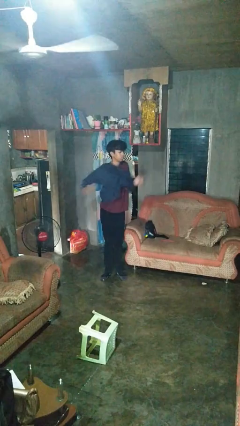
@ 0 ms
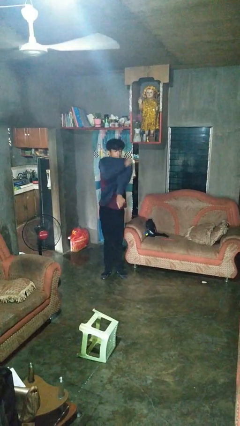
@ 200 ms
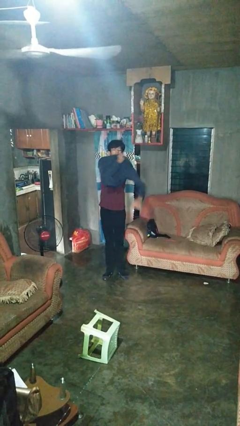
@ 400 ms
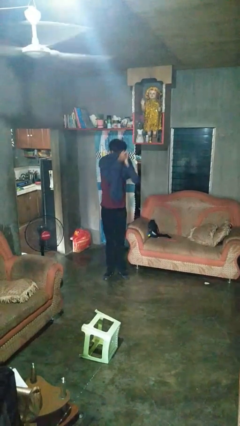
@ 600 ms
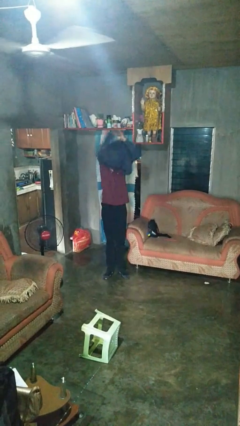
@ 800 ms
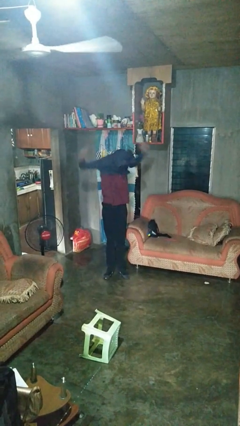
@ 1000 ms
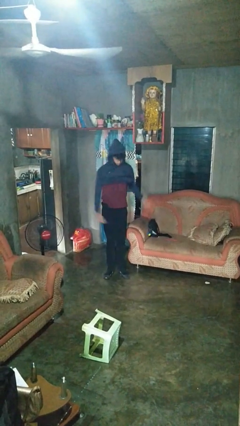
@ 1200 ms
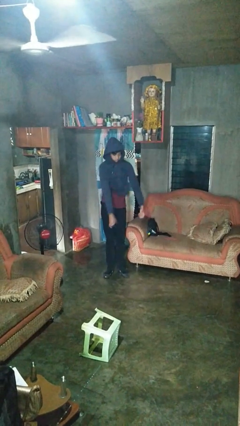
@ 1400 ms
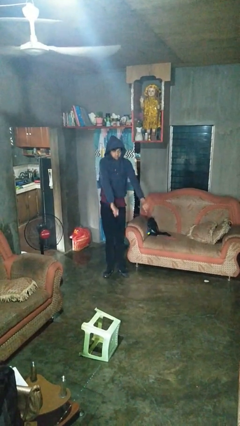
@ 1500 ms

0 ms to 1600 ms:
person puts on hoodie

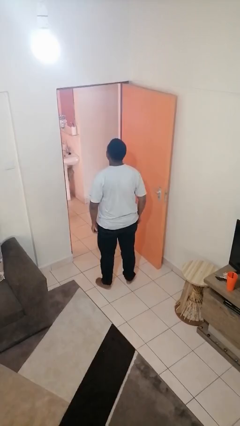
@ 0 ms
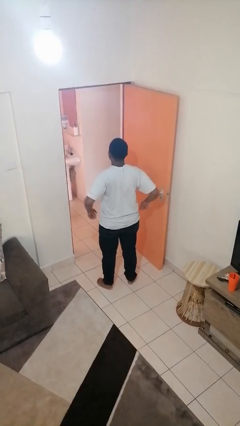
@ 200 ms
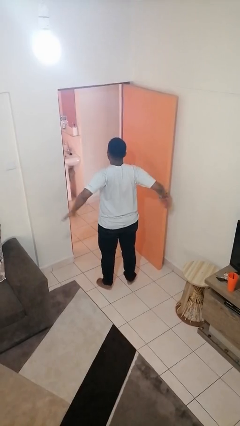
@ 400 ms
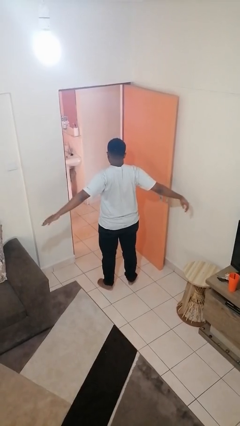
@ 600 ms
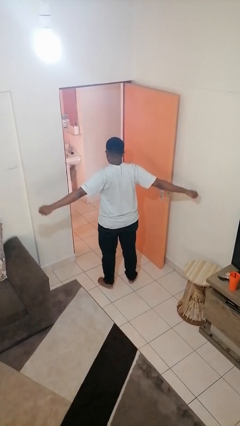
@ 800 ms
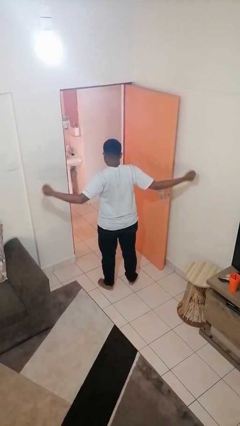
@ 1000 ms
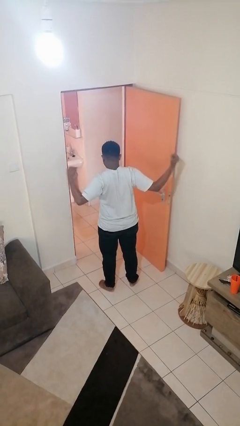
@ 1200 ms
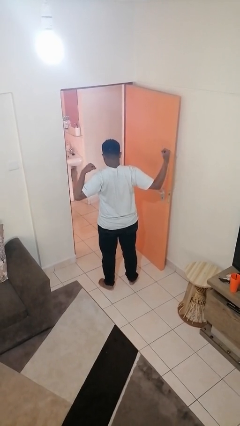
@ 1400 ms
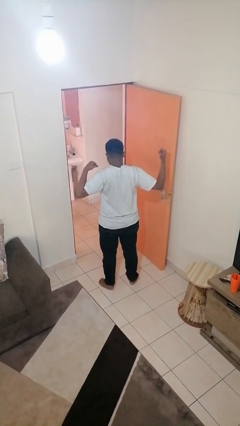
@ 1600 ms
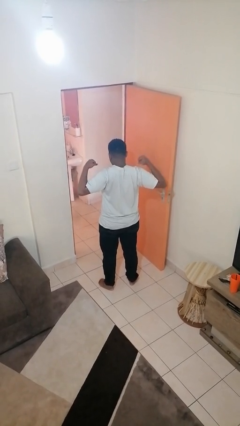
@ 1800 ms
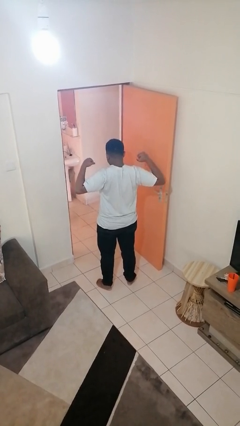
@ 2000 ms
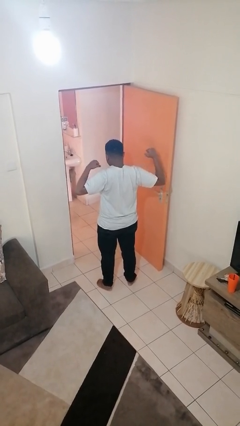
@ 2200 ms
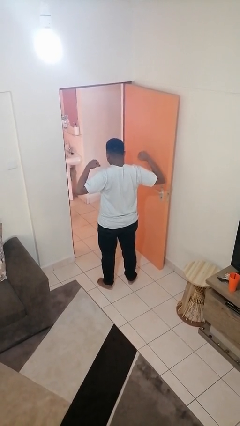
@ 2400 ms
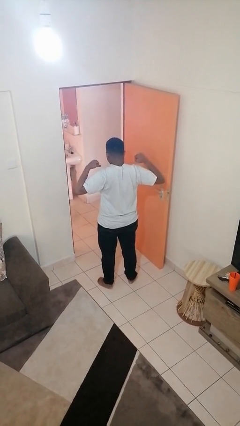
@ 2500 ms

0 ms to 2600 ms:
person stretches arms to side

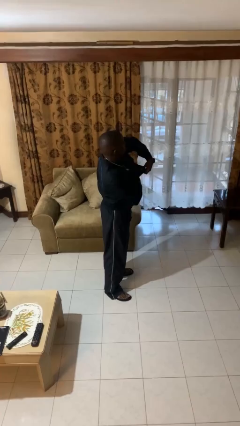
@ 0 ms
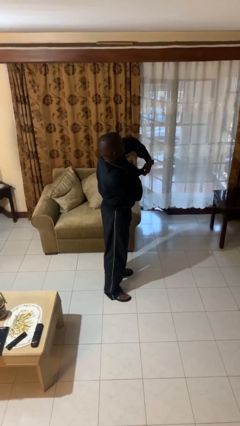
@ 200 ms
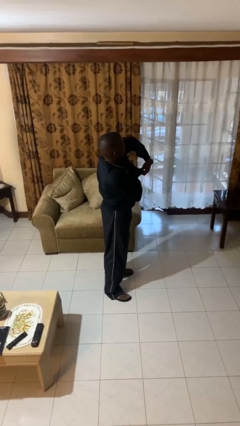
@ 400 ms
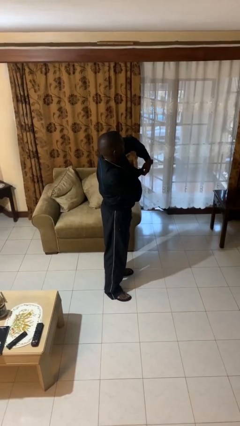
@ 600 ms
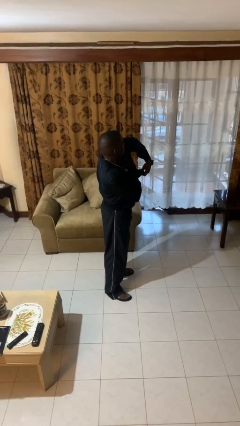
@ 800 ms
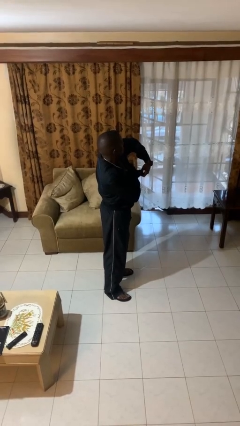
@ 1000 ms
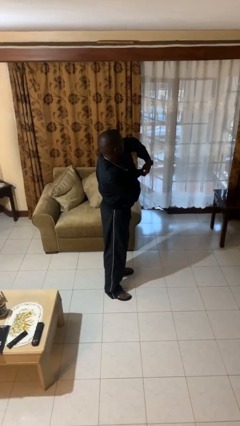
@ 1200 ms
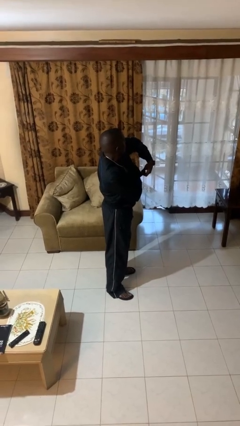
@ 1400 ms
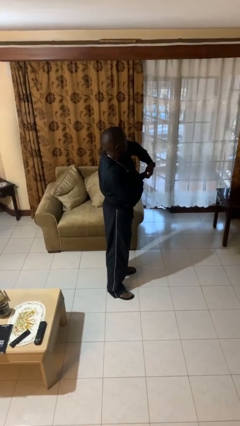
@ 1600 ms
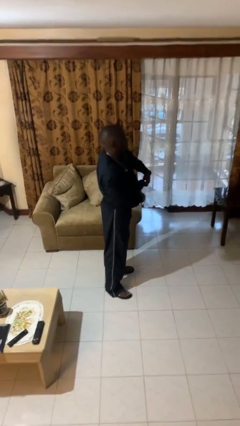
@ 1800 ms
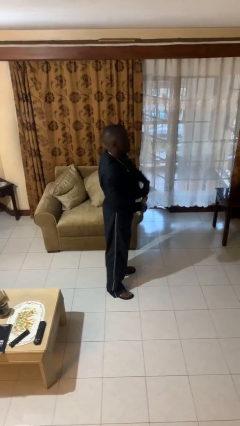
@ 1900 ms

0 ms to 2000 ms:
person applies deodorant

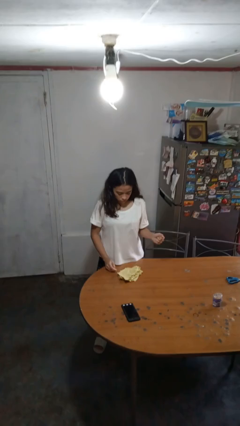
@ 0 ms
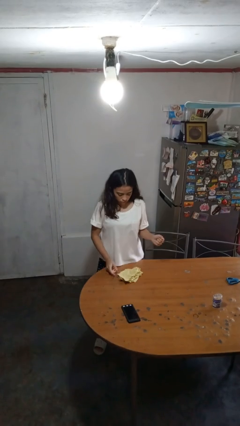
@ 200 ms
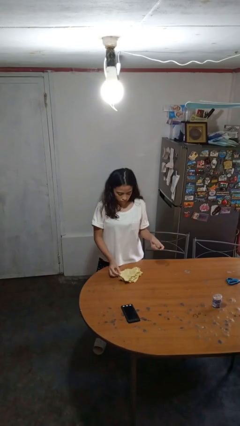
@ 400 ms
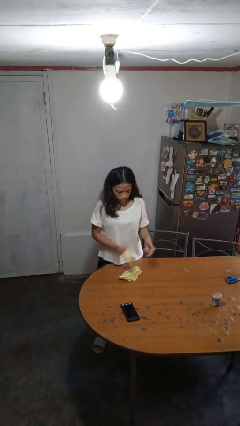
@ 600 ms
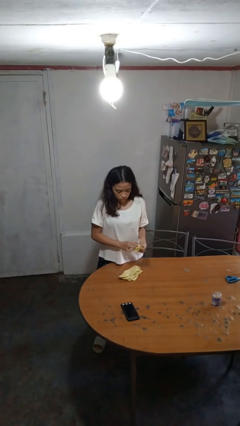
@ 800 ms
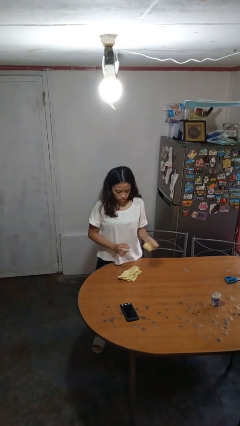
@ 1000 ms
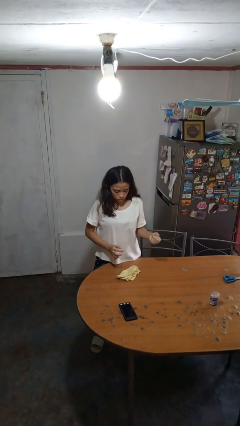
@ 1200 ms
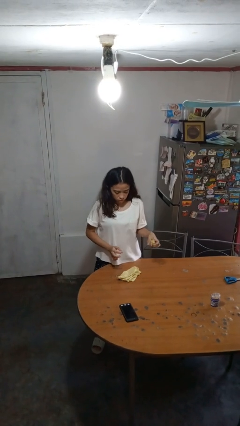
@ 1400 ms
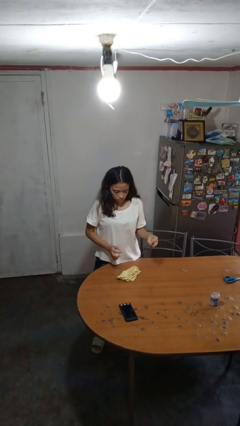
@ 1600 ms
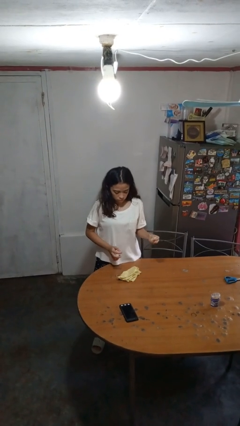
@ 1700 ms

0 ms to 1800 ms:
person crumples paper

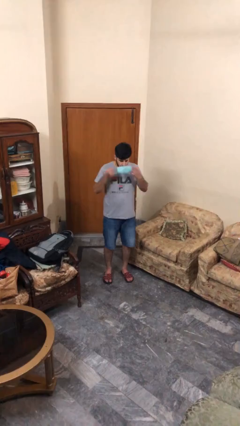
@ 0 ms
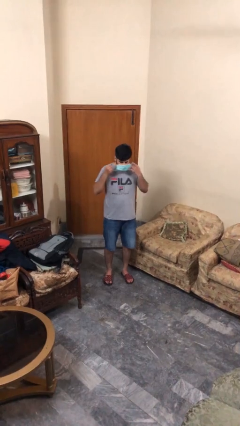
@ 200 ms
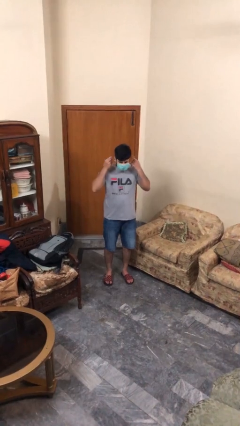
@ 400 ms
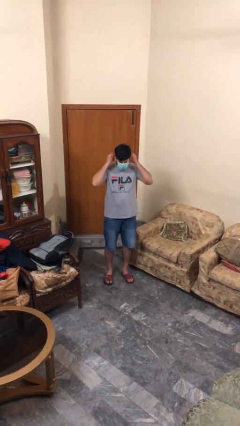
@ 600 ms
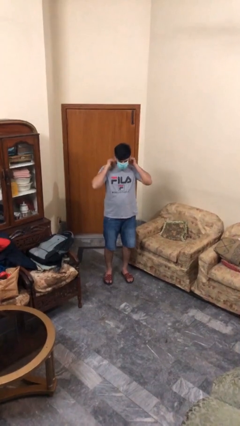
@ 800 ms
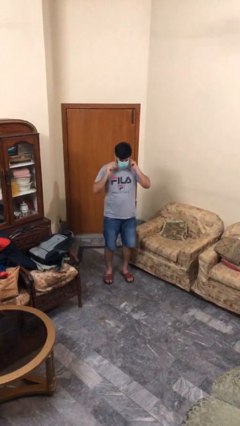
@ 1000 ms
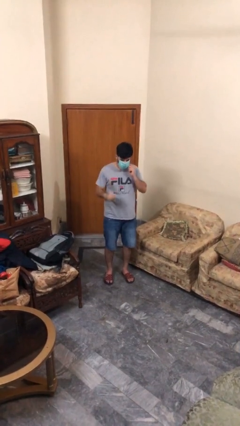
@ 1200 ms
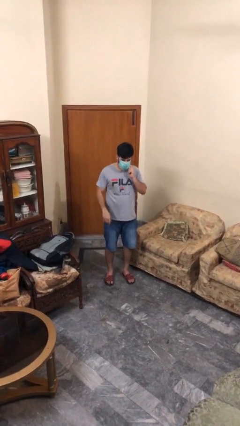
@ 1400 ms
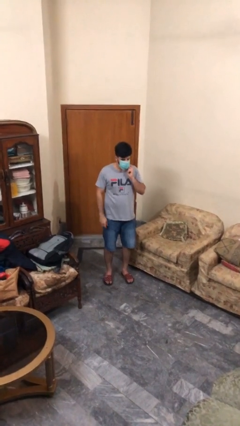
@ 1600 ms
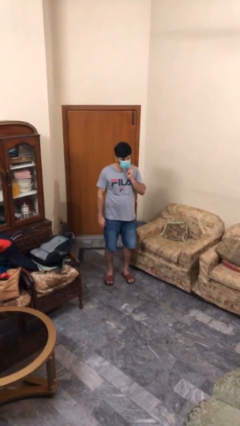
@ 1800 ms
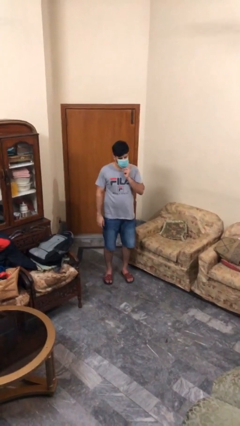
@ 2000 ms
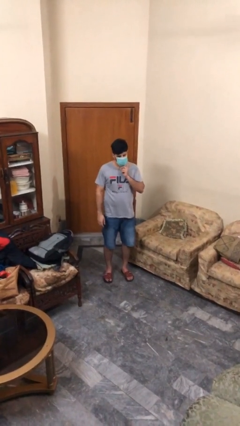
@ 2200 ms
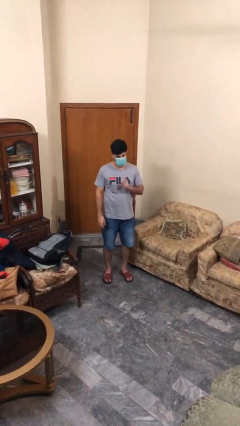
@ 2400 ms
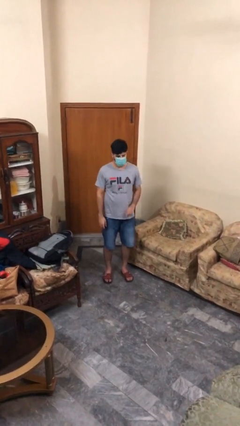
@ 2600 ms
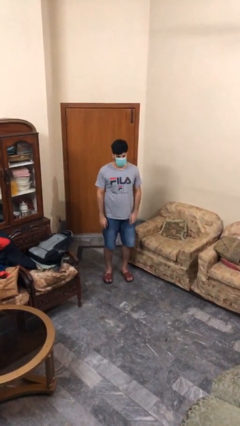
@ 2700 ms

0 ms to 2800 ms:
person puts on facemask

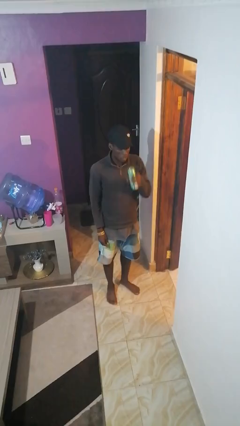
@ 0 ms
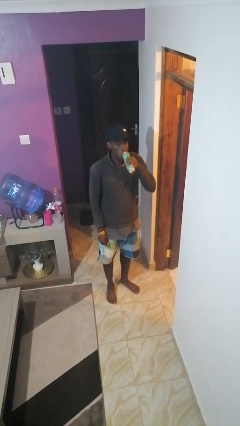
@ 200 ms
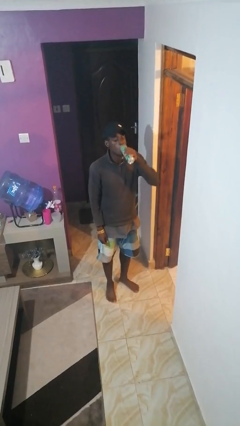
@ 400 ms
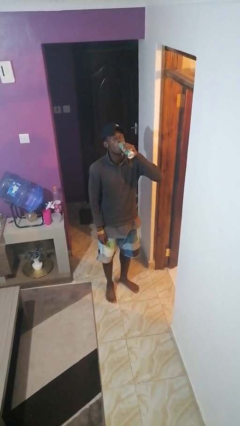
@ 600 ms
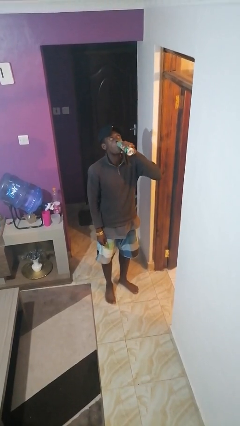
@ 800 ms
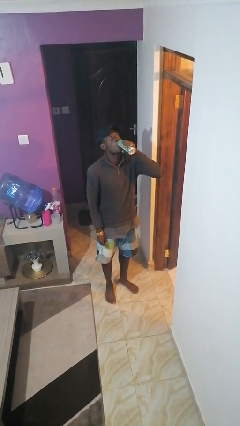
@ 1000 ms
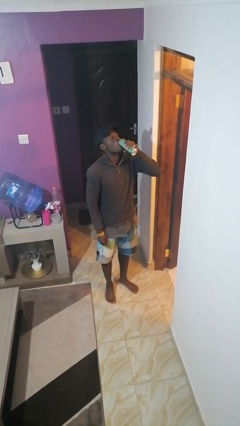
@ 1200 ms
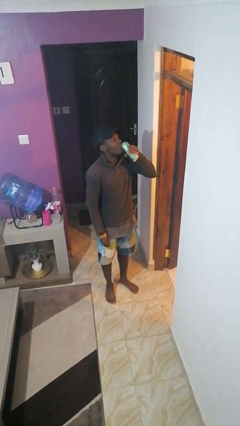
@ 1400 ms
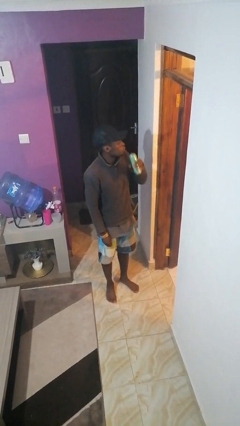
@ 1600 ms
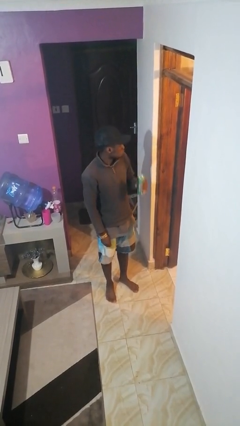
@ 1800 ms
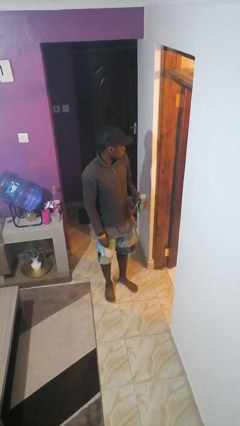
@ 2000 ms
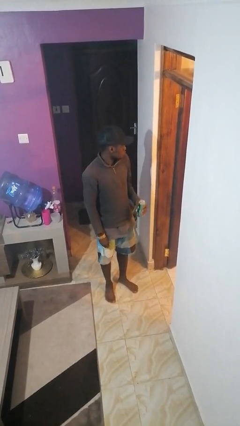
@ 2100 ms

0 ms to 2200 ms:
person drinks from beverage can

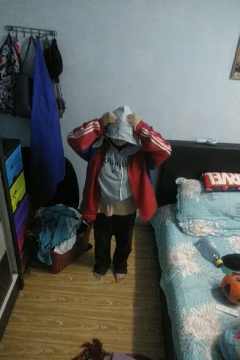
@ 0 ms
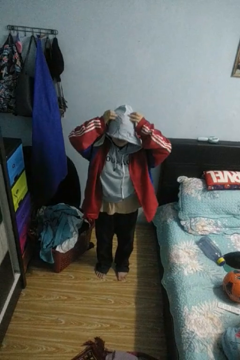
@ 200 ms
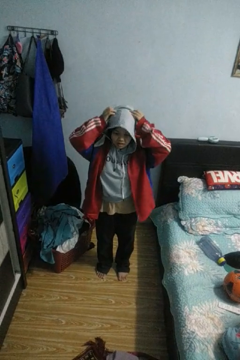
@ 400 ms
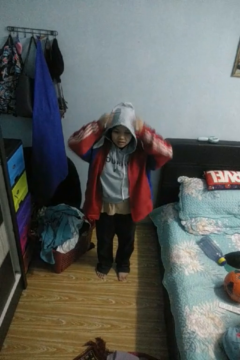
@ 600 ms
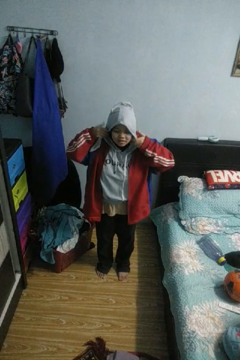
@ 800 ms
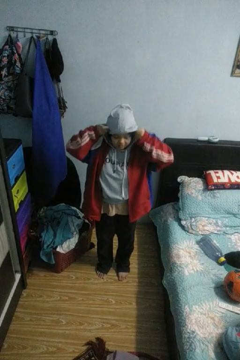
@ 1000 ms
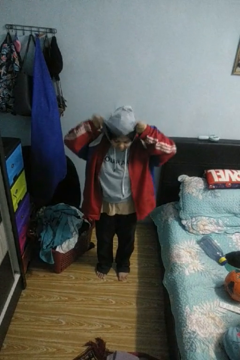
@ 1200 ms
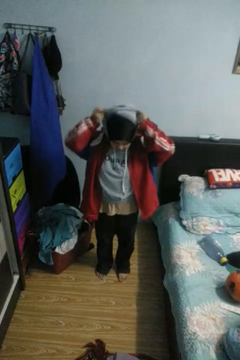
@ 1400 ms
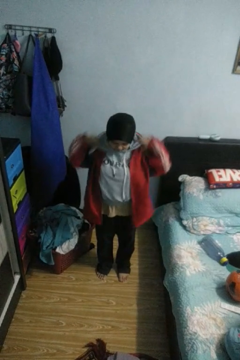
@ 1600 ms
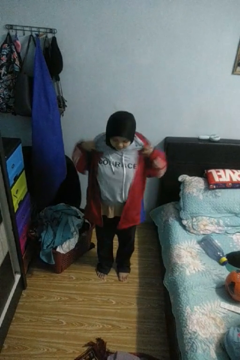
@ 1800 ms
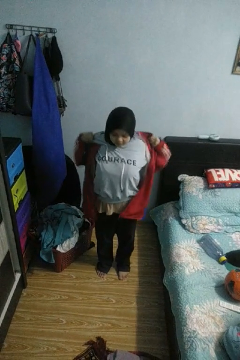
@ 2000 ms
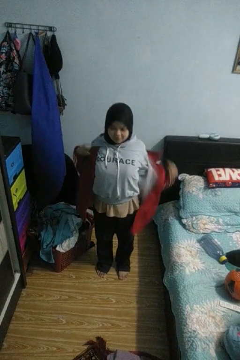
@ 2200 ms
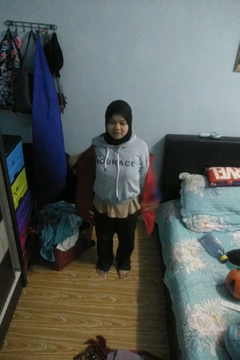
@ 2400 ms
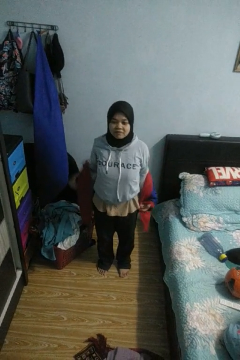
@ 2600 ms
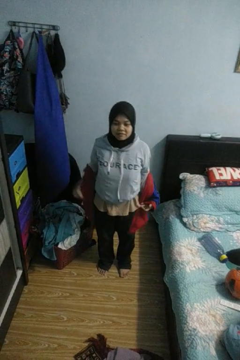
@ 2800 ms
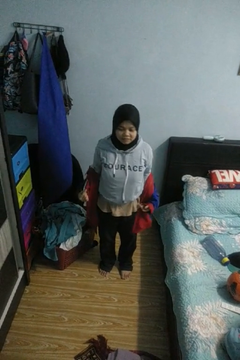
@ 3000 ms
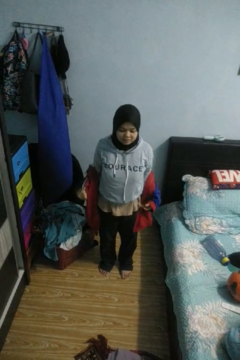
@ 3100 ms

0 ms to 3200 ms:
person takes off hoodie

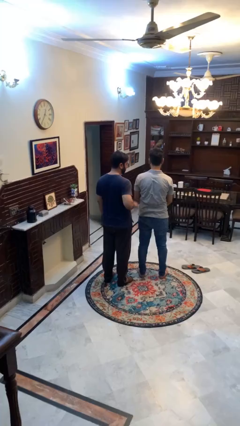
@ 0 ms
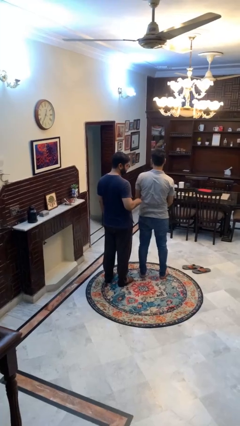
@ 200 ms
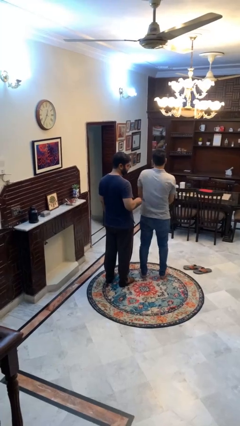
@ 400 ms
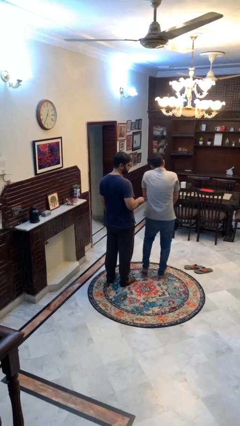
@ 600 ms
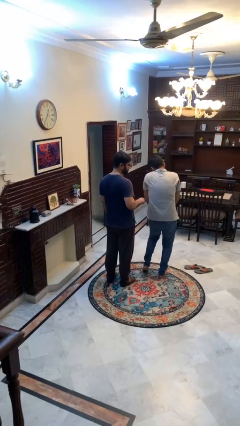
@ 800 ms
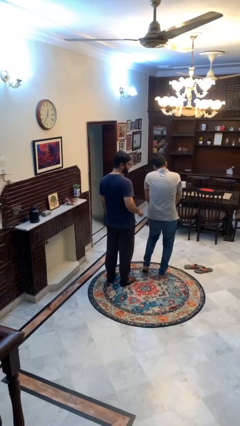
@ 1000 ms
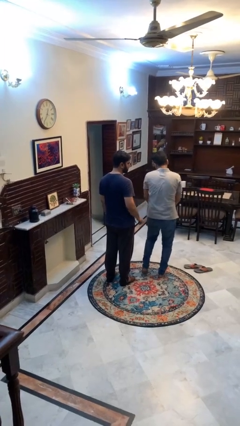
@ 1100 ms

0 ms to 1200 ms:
person tickles person

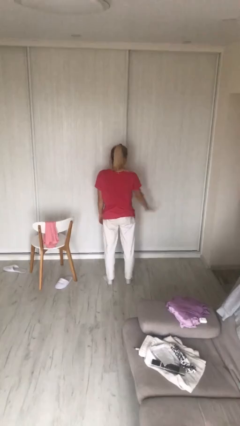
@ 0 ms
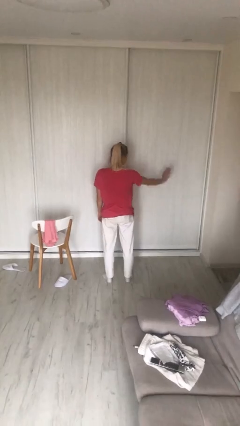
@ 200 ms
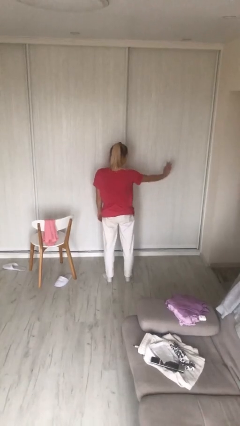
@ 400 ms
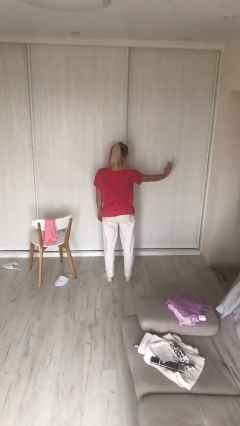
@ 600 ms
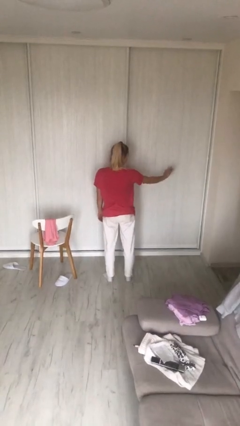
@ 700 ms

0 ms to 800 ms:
person gestures stop
